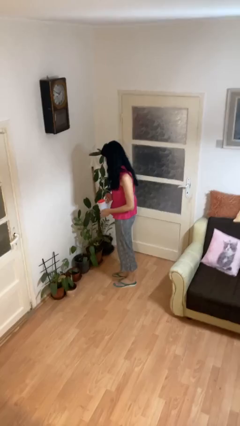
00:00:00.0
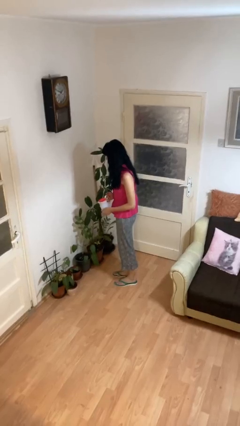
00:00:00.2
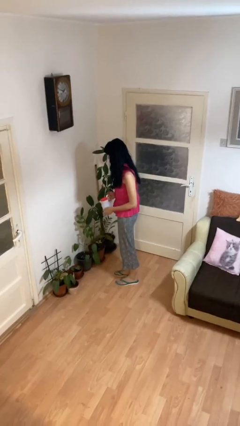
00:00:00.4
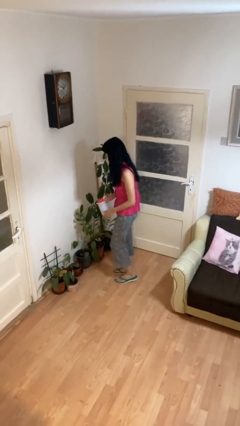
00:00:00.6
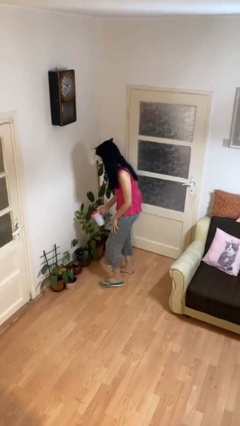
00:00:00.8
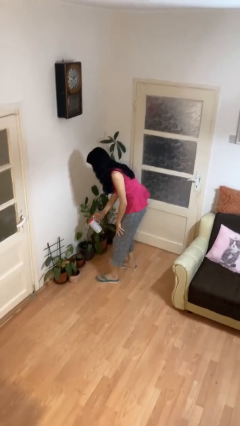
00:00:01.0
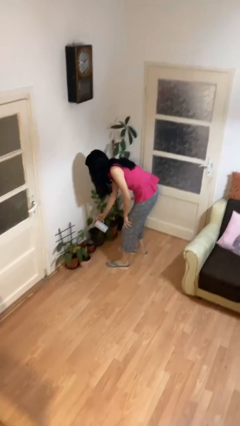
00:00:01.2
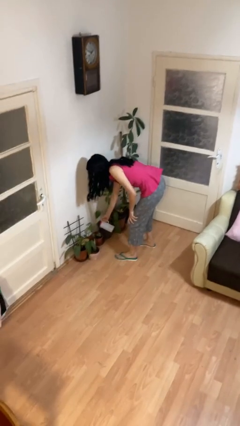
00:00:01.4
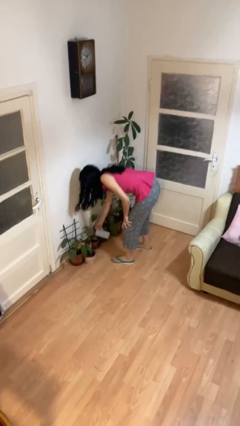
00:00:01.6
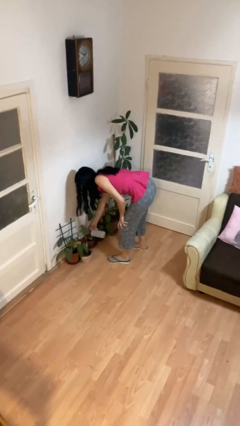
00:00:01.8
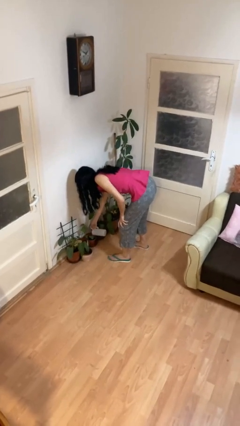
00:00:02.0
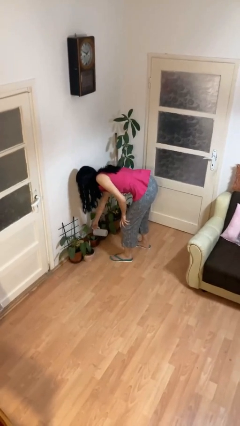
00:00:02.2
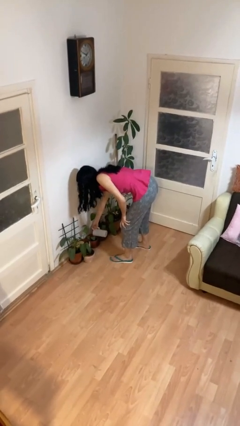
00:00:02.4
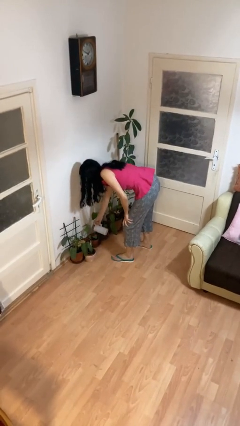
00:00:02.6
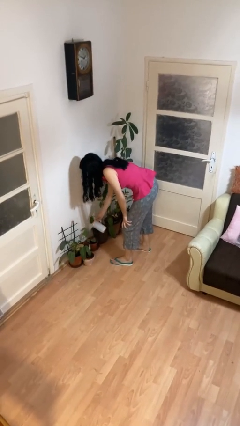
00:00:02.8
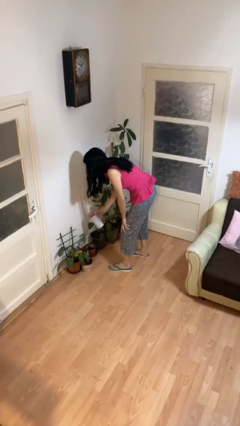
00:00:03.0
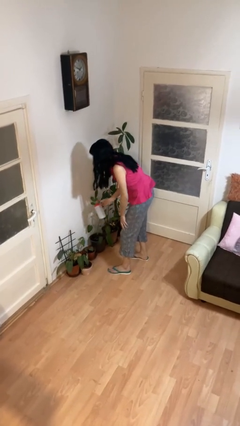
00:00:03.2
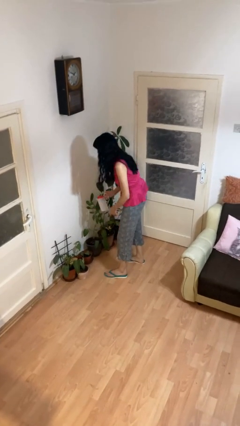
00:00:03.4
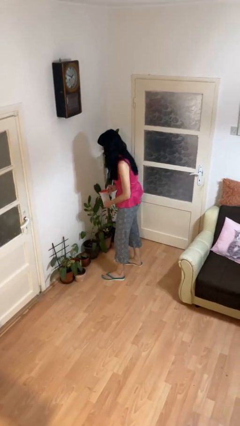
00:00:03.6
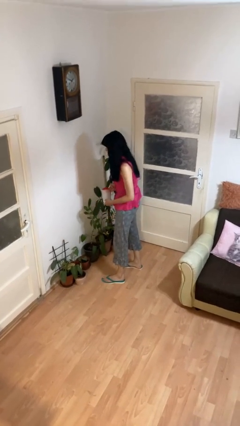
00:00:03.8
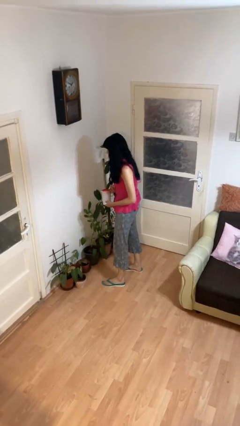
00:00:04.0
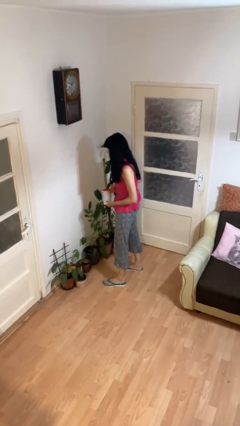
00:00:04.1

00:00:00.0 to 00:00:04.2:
person waters houseplant

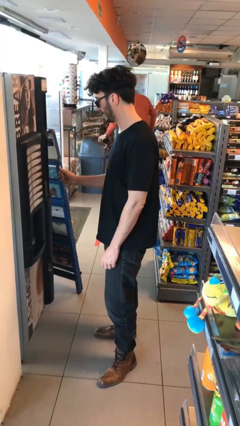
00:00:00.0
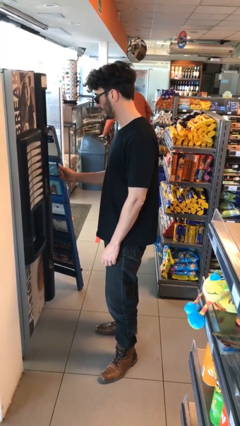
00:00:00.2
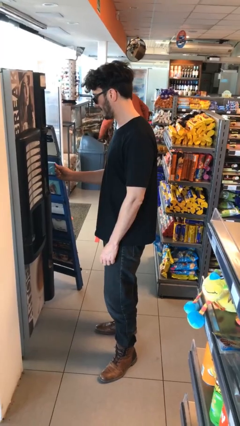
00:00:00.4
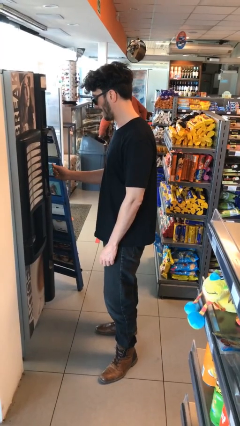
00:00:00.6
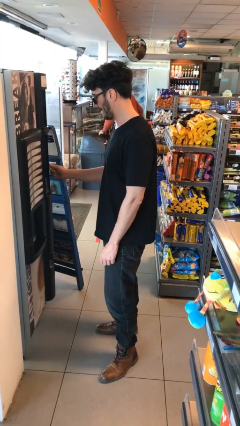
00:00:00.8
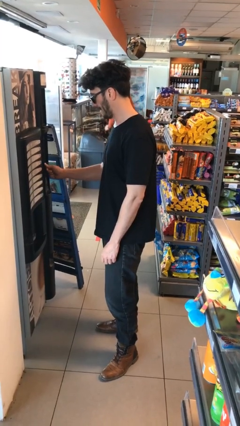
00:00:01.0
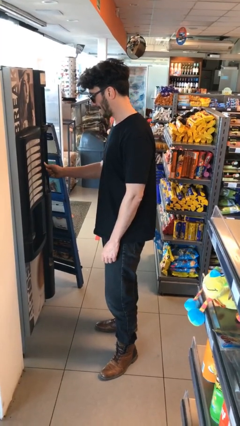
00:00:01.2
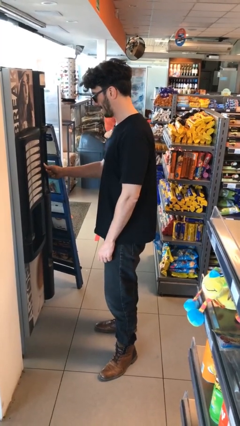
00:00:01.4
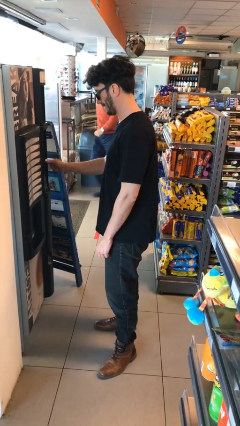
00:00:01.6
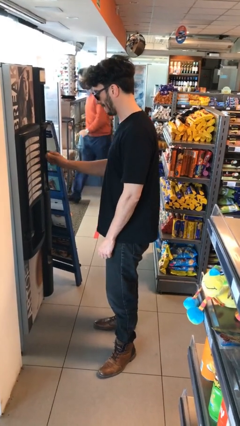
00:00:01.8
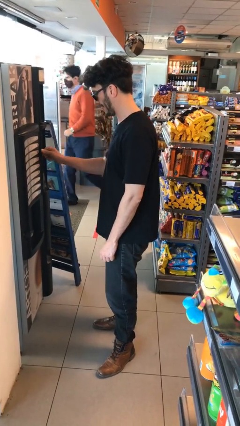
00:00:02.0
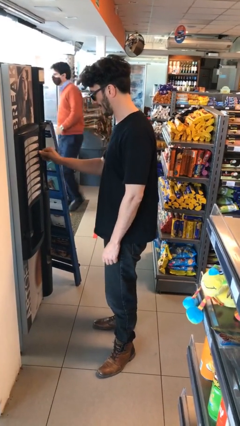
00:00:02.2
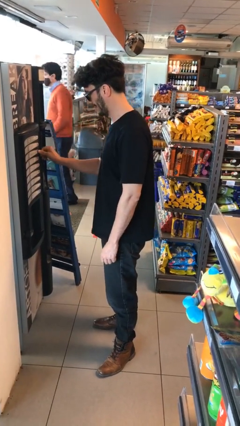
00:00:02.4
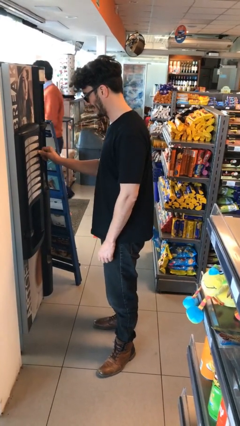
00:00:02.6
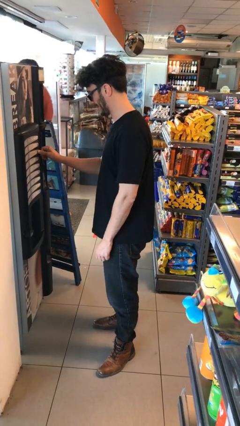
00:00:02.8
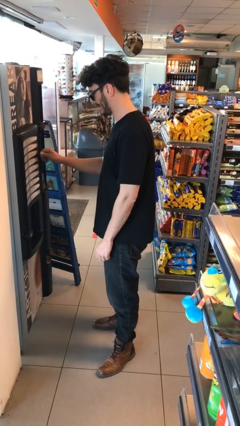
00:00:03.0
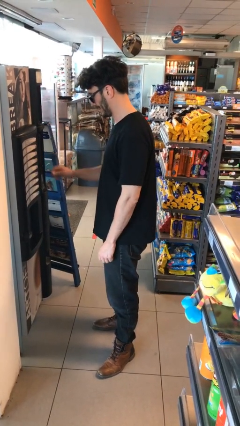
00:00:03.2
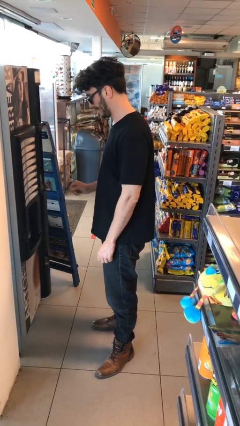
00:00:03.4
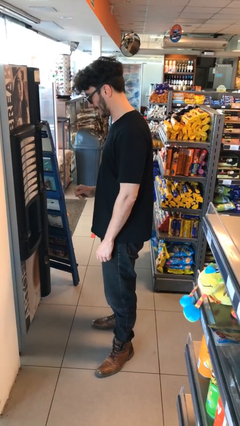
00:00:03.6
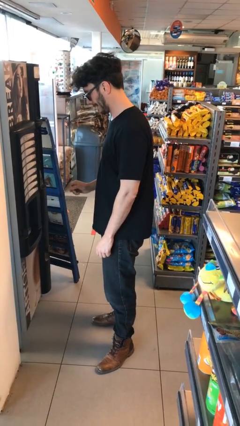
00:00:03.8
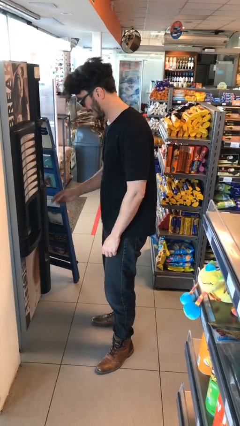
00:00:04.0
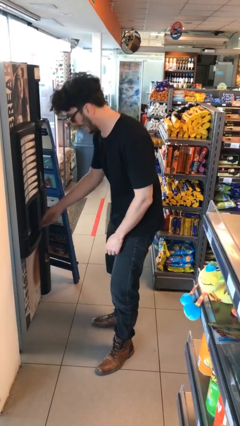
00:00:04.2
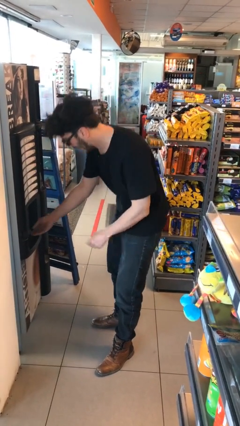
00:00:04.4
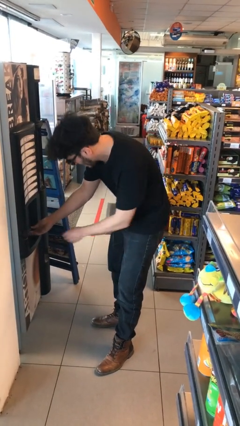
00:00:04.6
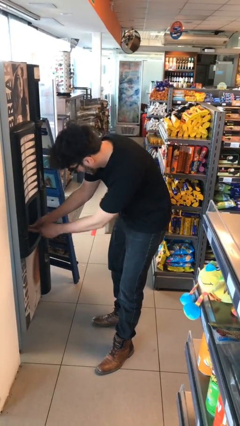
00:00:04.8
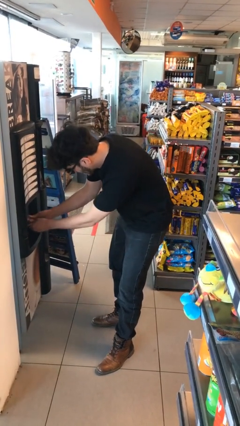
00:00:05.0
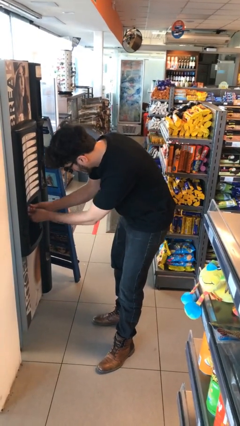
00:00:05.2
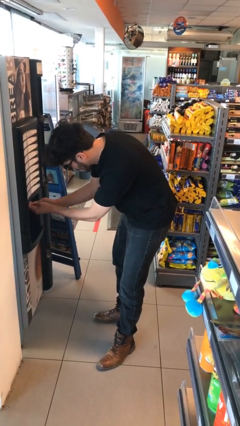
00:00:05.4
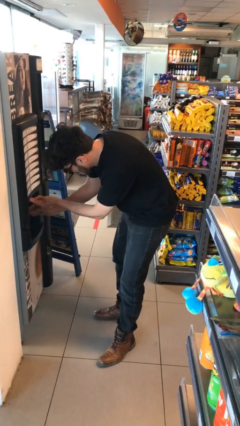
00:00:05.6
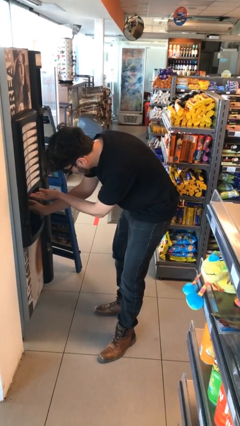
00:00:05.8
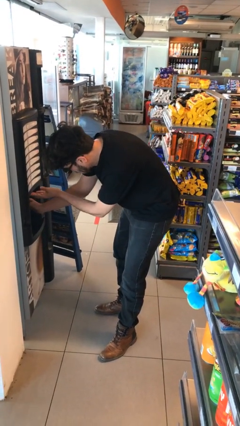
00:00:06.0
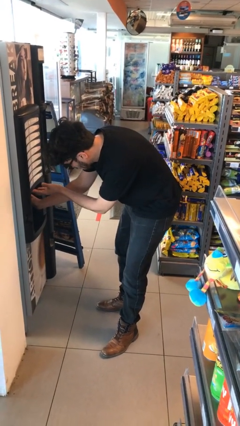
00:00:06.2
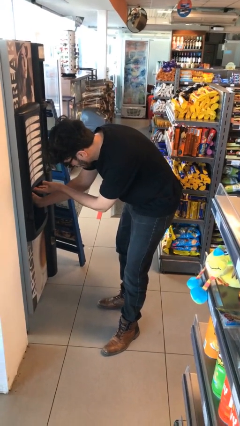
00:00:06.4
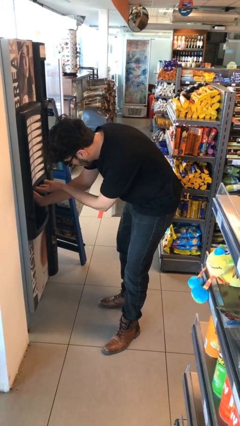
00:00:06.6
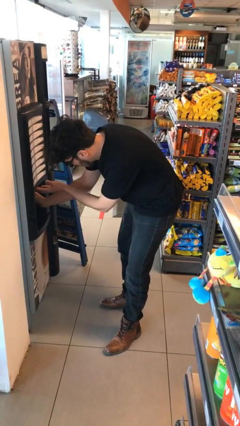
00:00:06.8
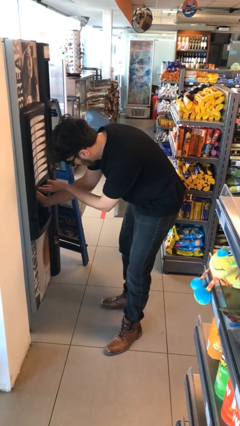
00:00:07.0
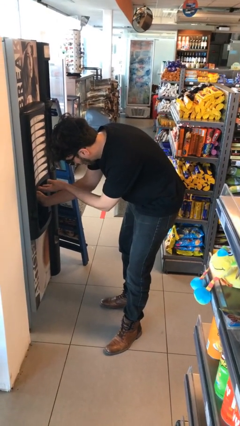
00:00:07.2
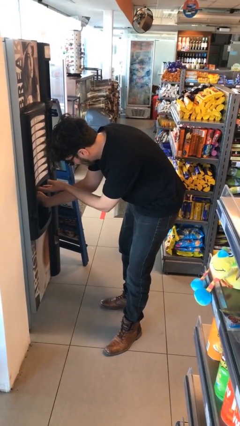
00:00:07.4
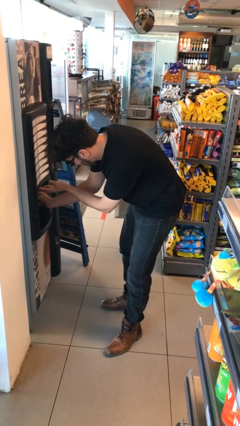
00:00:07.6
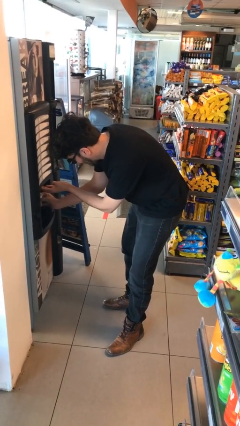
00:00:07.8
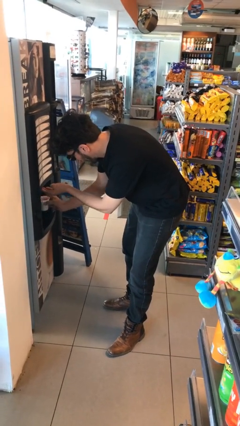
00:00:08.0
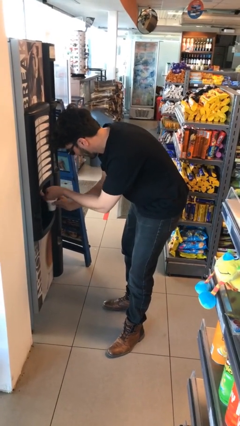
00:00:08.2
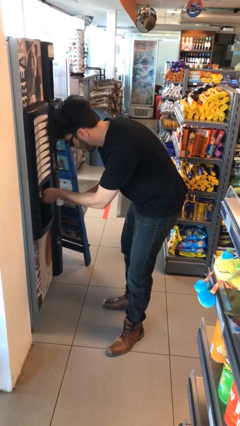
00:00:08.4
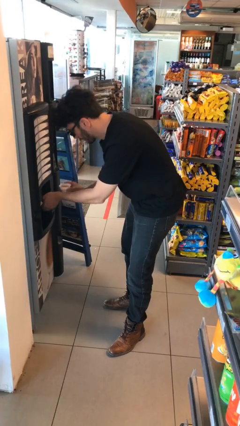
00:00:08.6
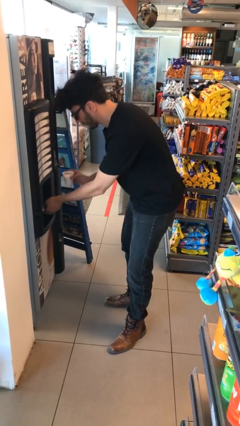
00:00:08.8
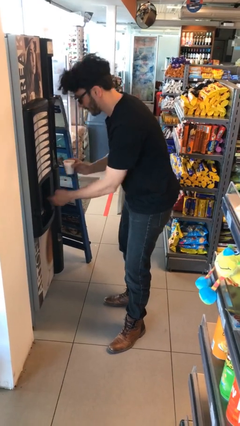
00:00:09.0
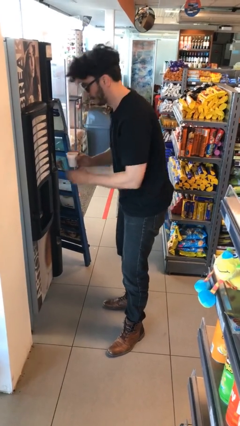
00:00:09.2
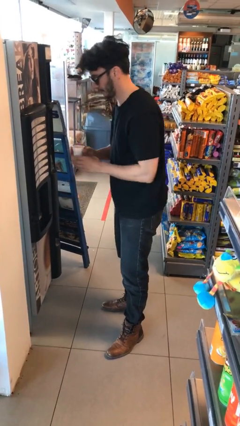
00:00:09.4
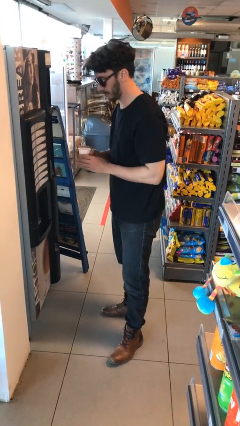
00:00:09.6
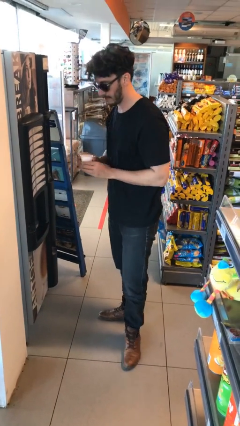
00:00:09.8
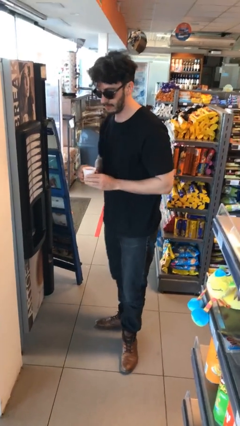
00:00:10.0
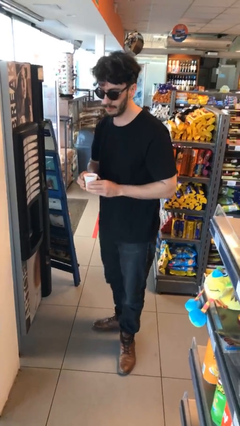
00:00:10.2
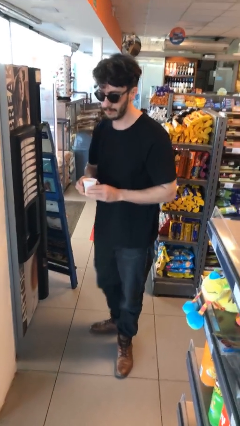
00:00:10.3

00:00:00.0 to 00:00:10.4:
person purchases from machine

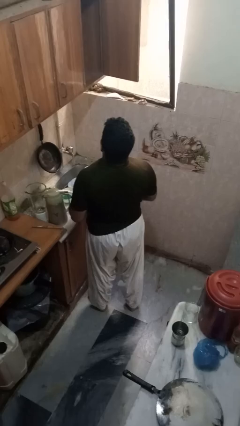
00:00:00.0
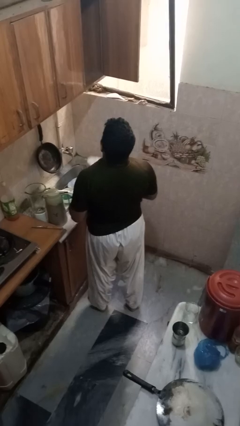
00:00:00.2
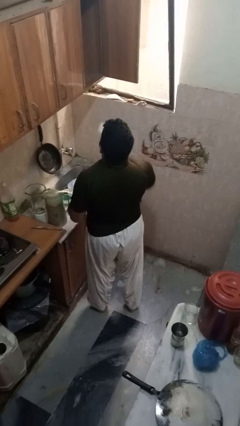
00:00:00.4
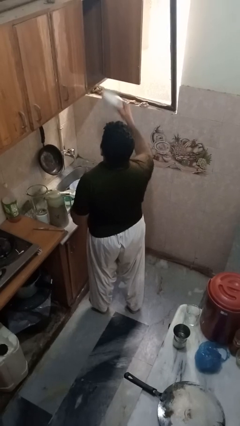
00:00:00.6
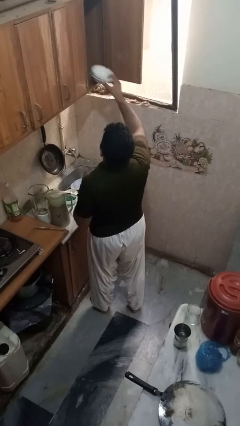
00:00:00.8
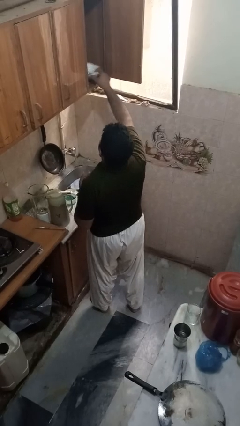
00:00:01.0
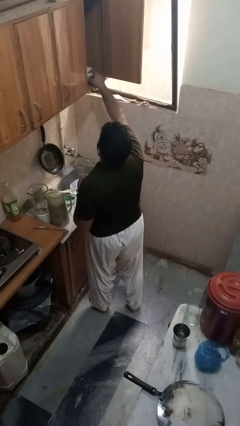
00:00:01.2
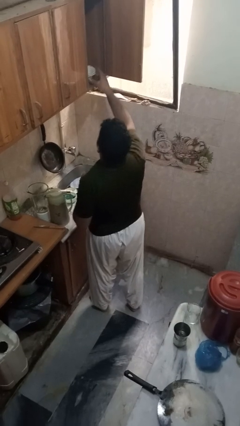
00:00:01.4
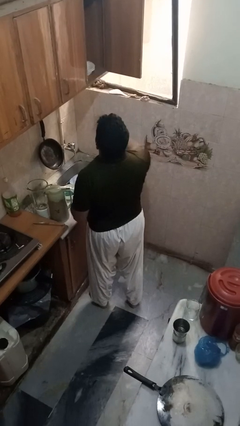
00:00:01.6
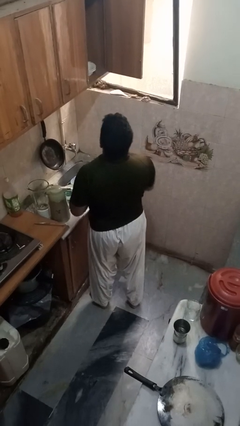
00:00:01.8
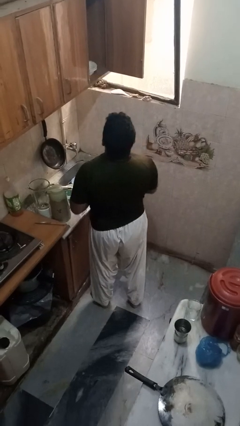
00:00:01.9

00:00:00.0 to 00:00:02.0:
person puts object in cabinet

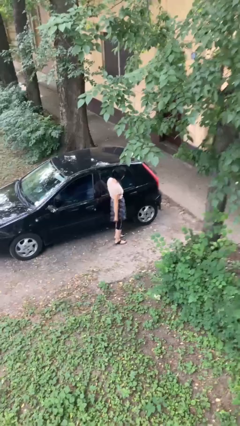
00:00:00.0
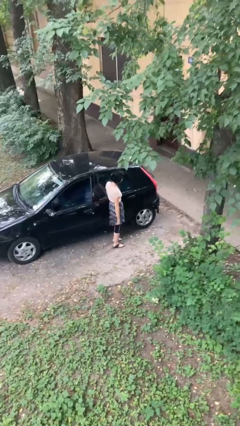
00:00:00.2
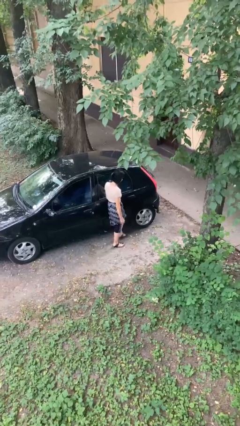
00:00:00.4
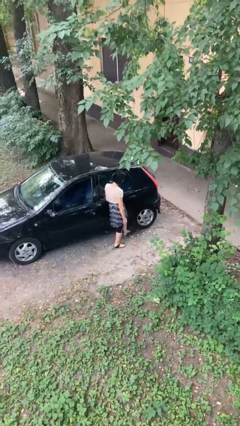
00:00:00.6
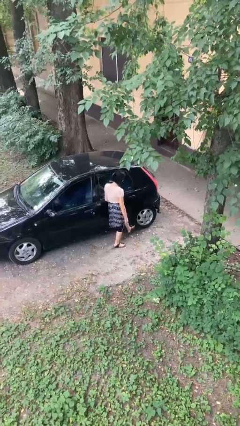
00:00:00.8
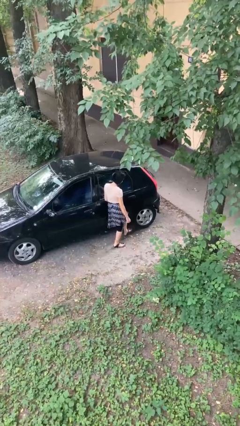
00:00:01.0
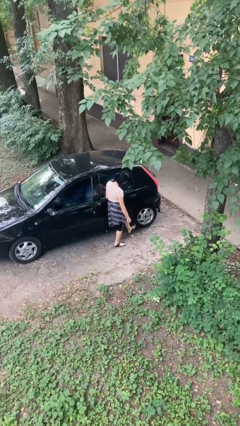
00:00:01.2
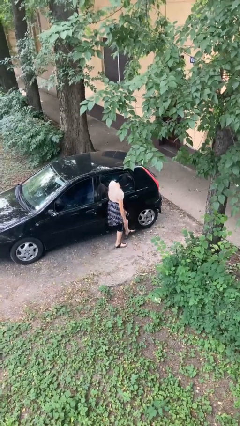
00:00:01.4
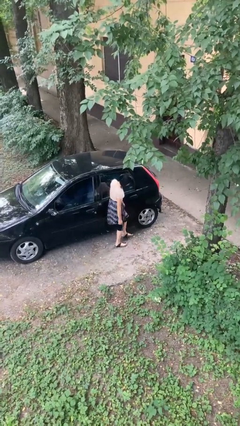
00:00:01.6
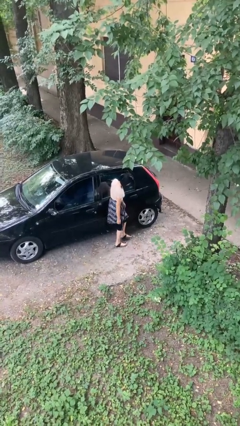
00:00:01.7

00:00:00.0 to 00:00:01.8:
person kicks car tires
